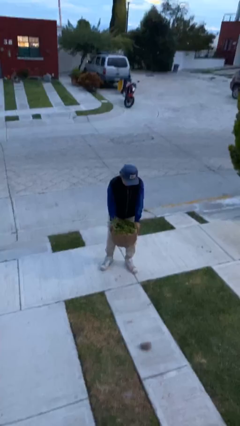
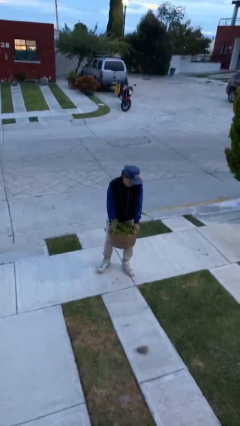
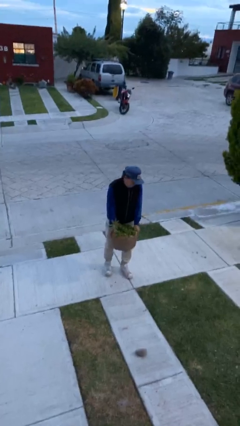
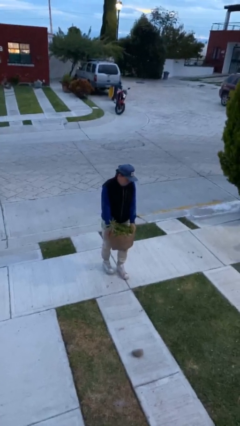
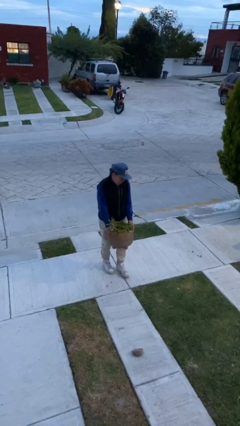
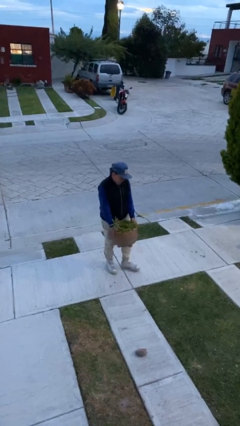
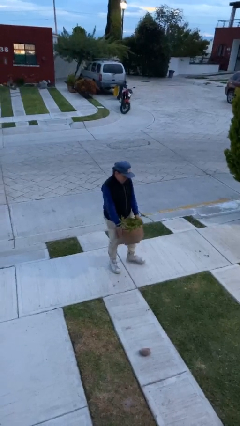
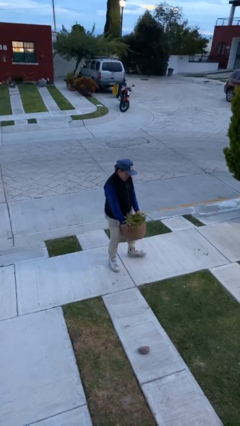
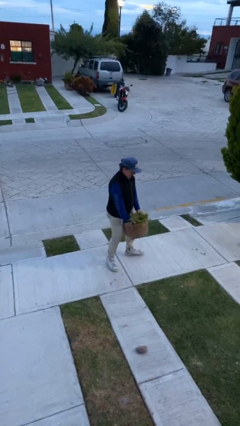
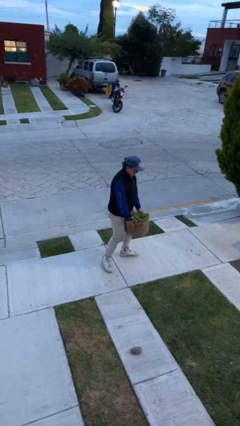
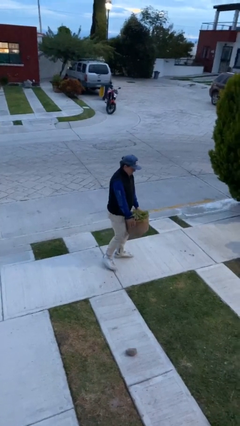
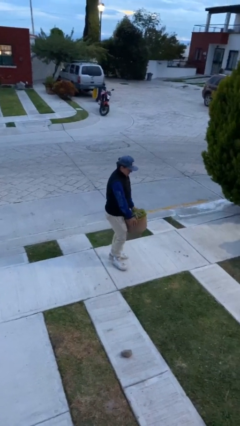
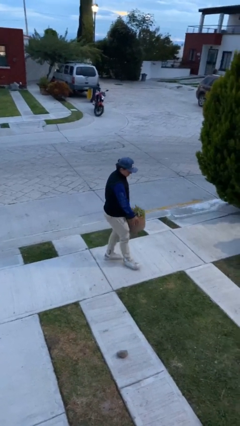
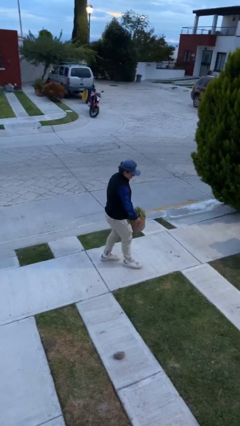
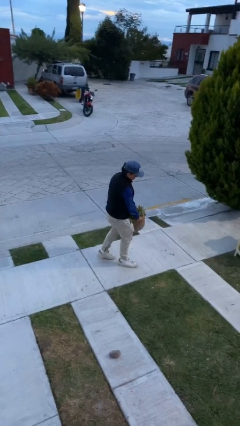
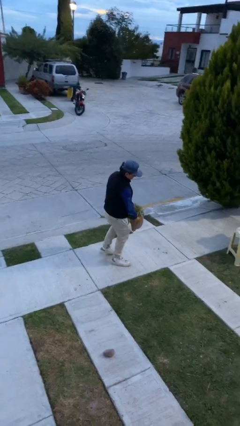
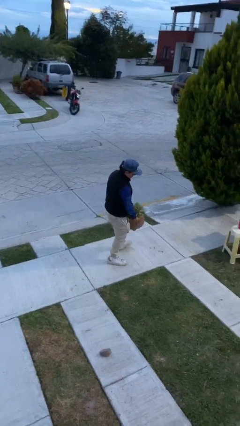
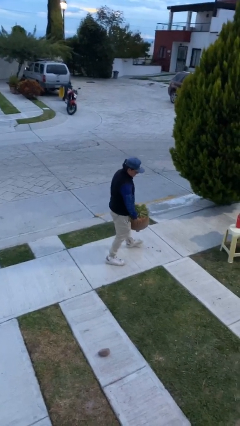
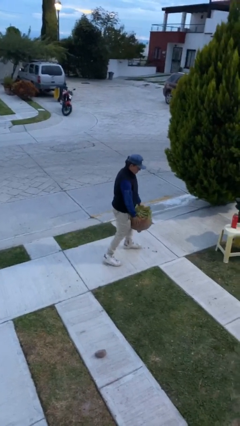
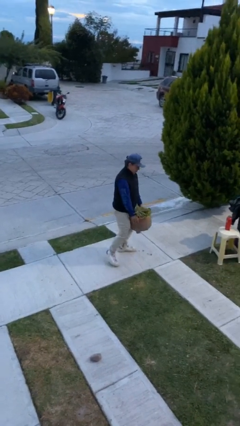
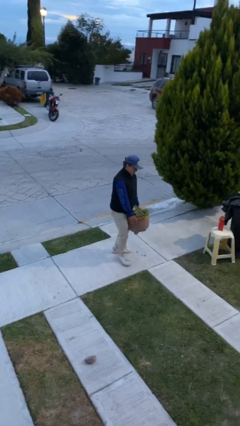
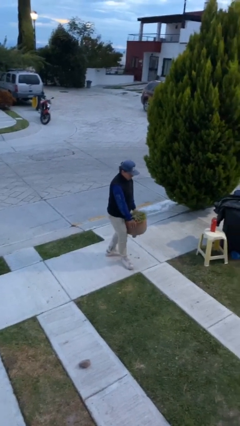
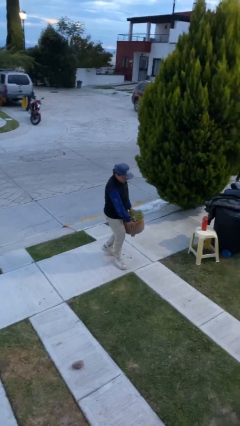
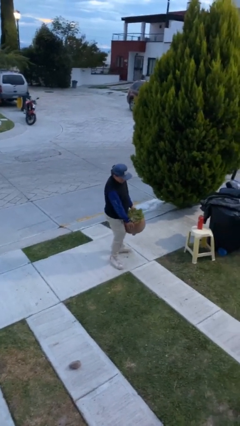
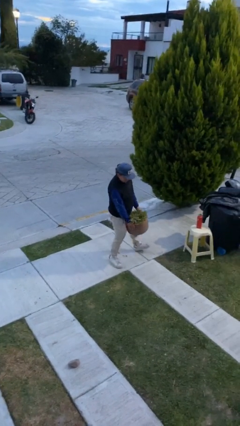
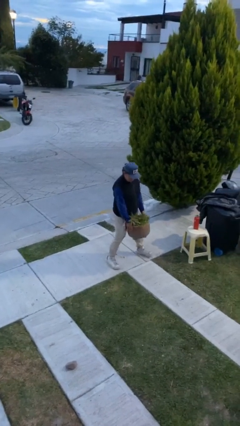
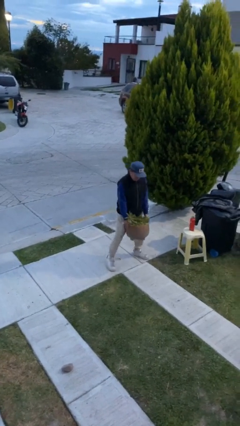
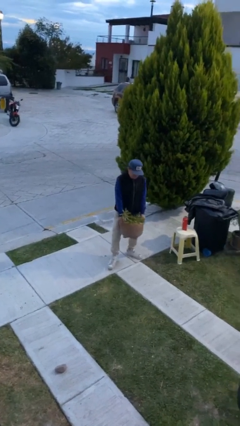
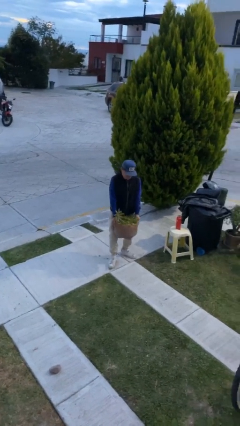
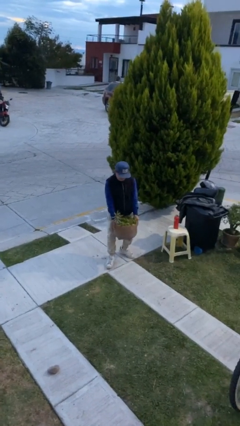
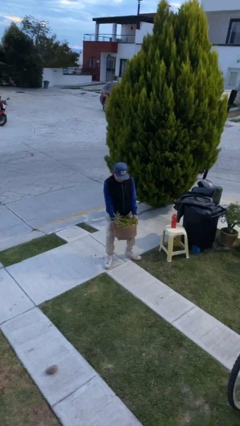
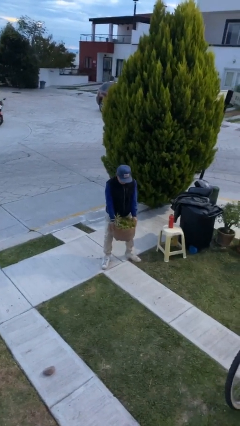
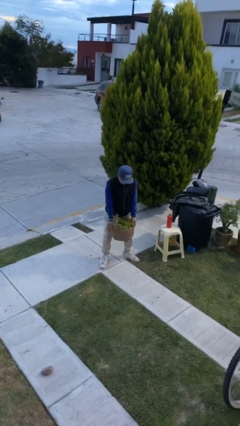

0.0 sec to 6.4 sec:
person carries heavy object

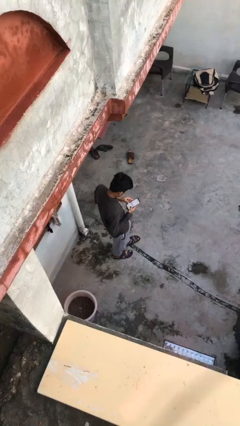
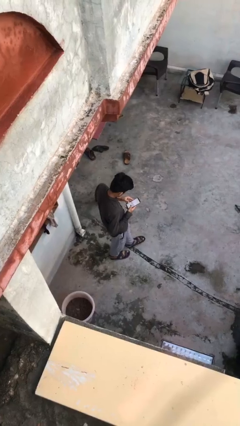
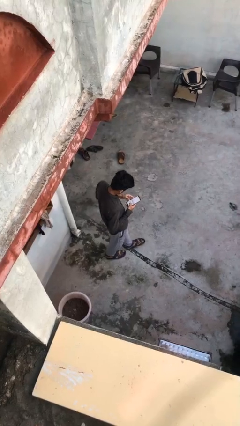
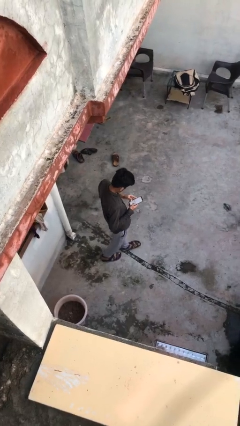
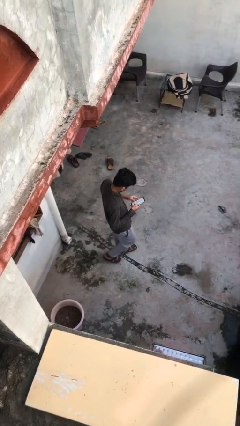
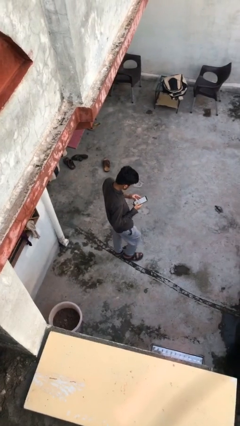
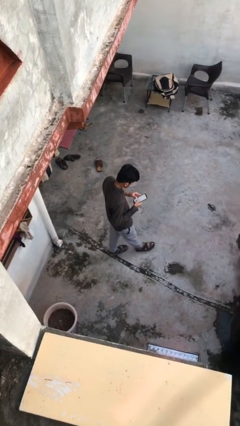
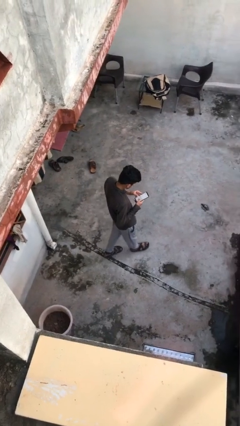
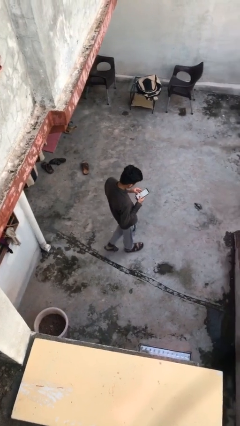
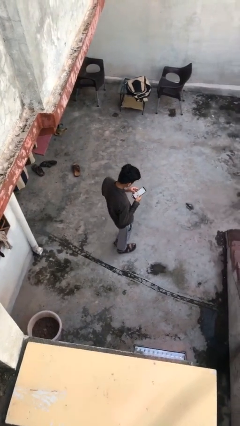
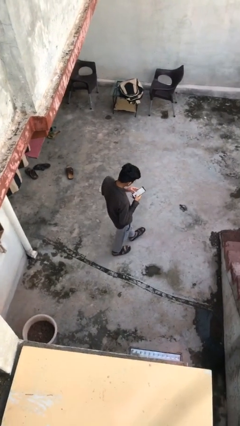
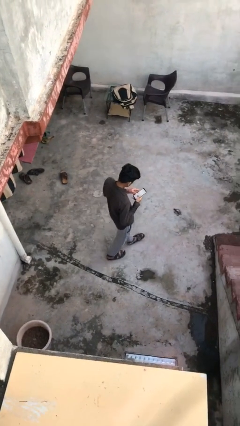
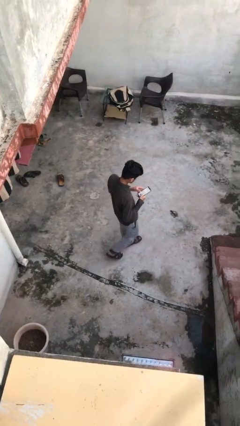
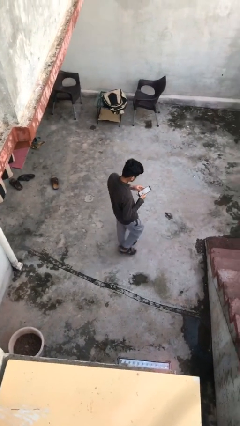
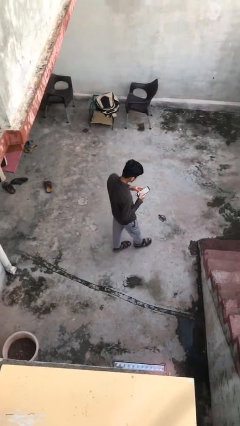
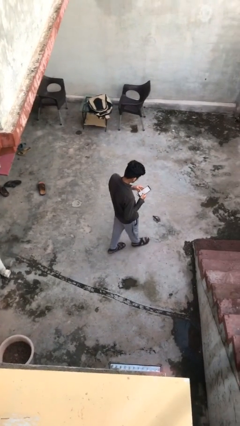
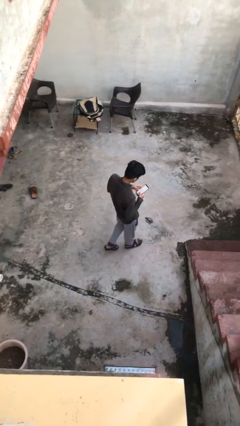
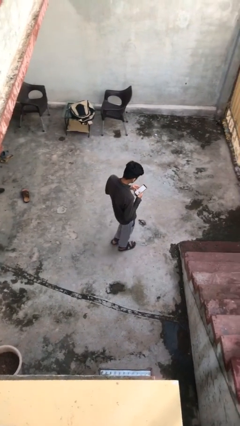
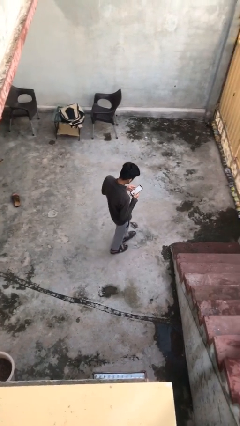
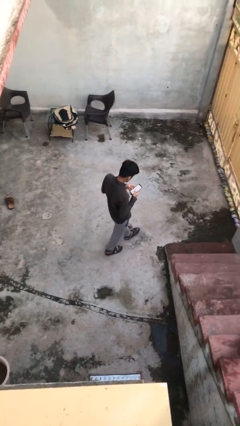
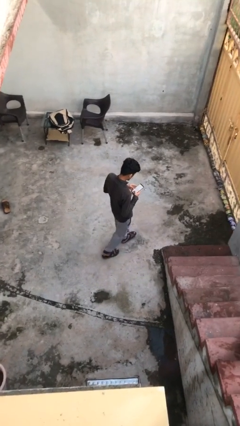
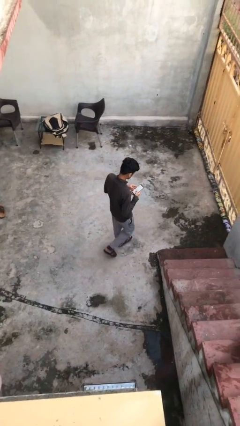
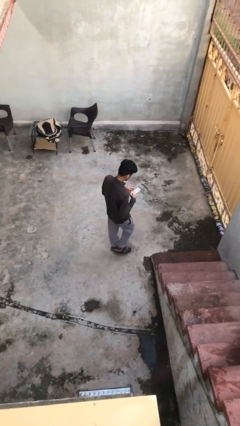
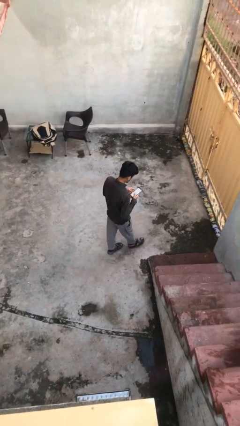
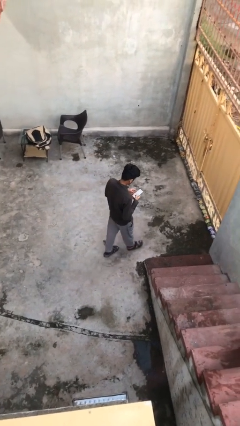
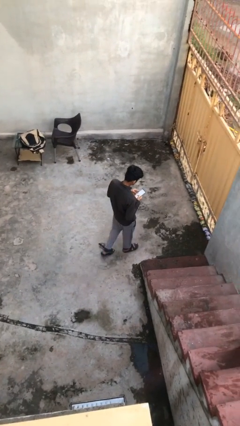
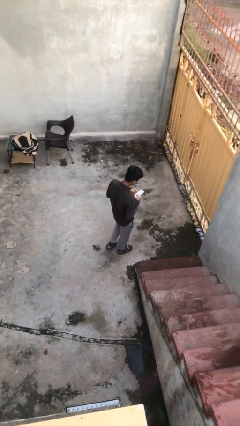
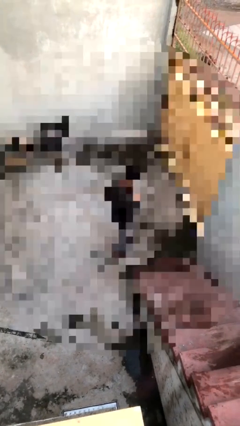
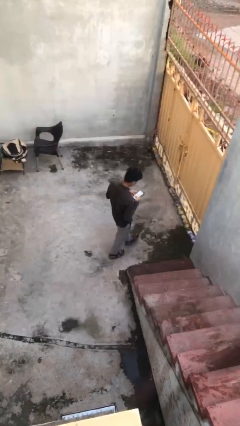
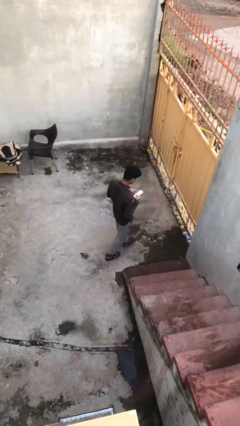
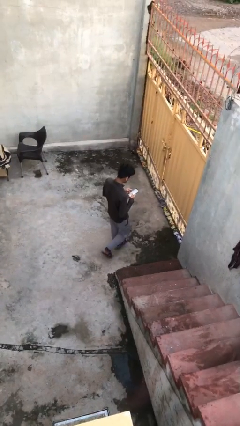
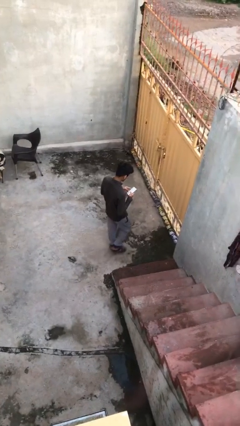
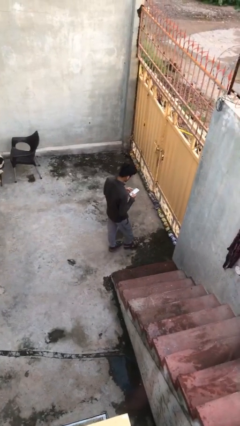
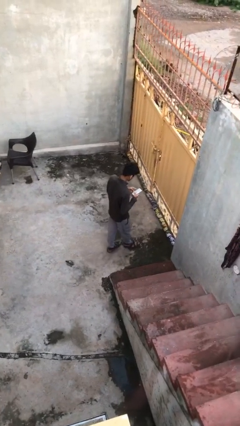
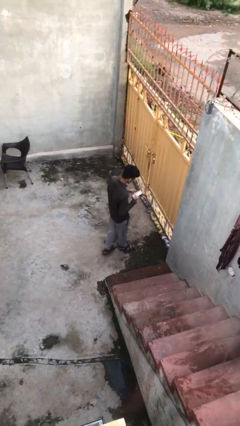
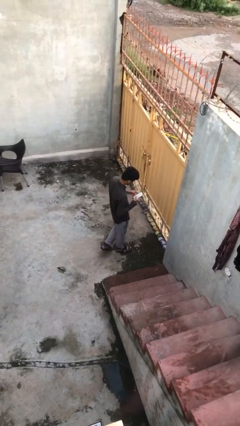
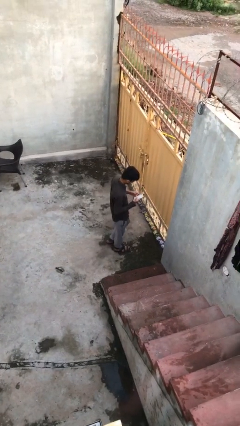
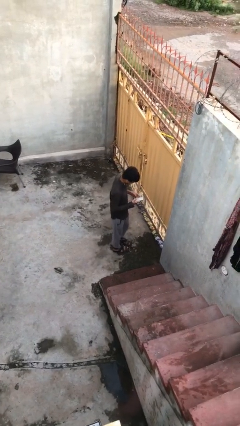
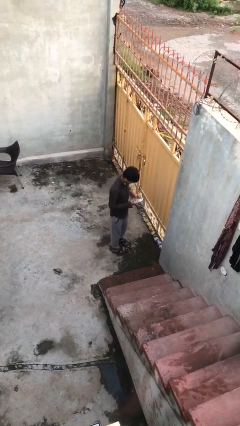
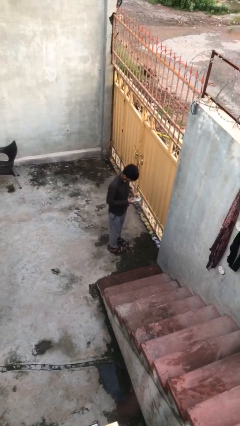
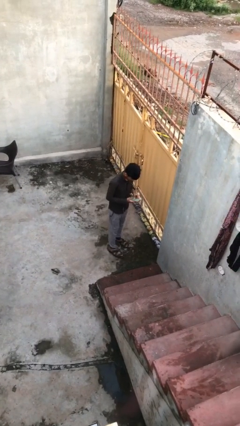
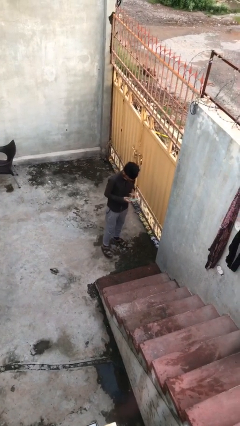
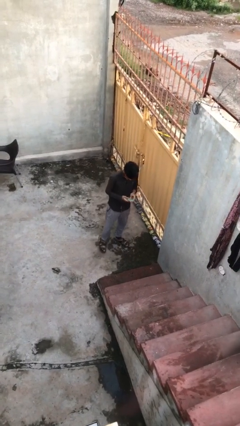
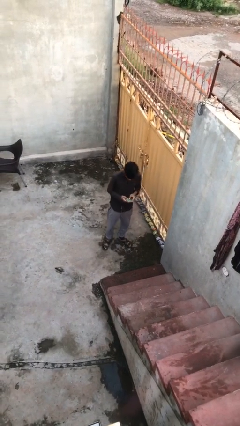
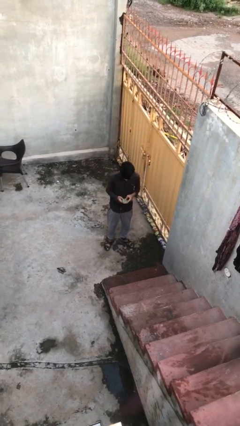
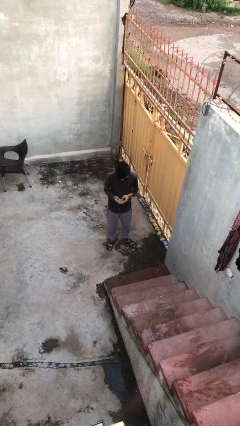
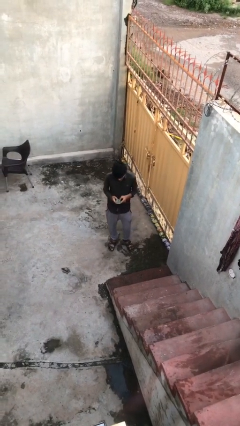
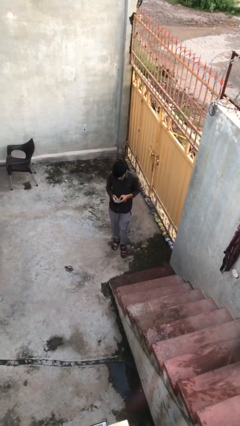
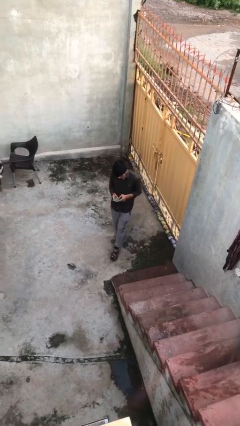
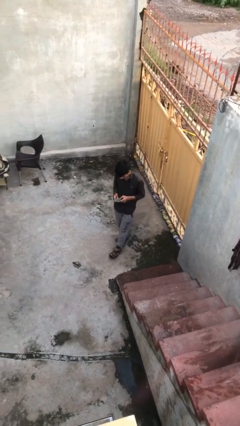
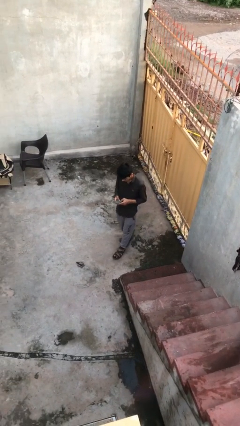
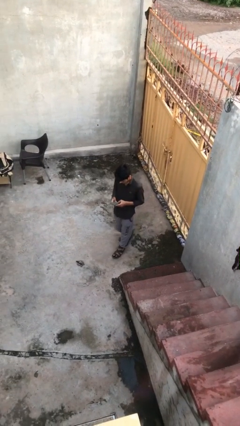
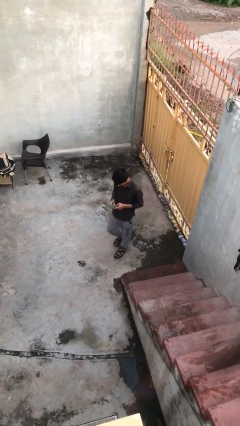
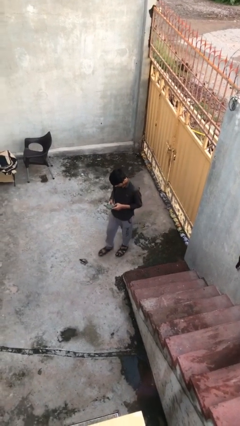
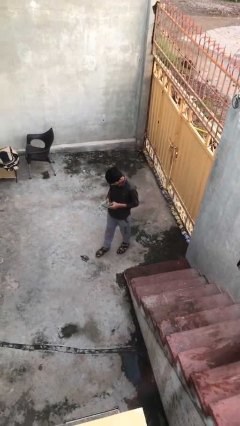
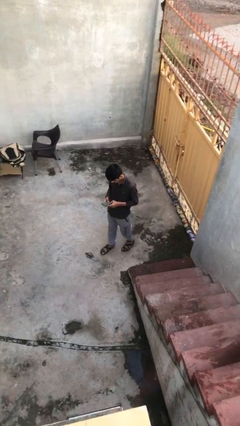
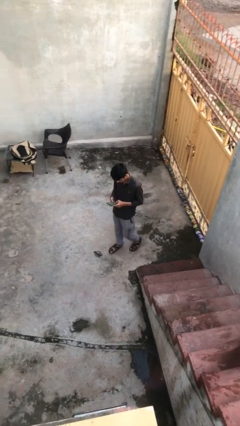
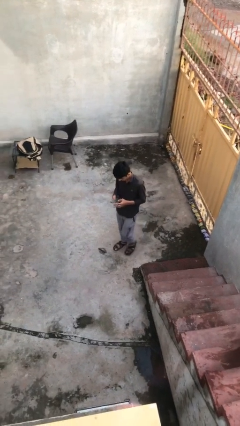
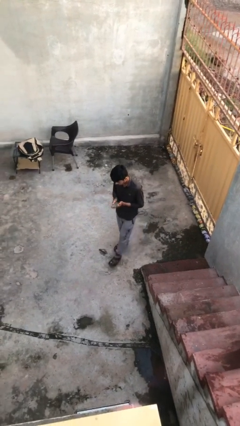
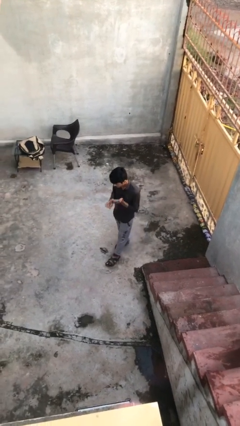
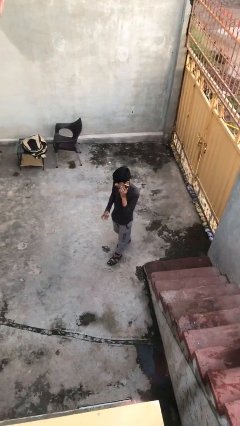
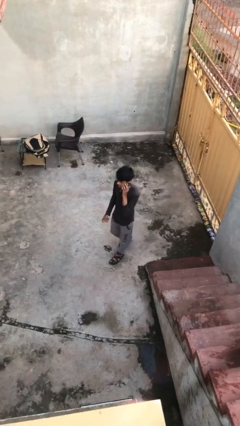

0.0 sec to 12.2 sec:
person texts on phone
